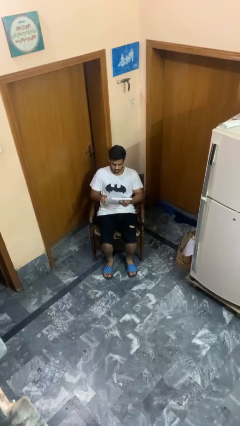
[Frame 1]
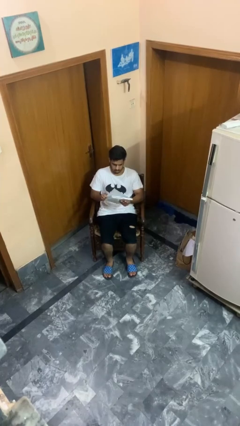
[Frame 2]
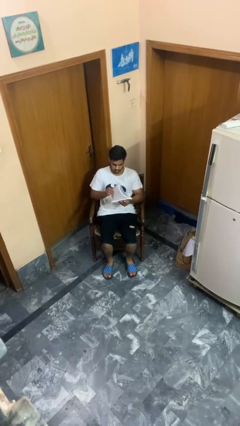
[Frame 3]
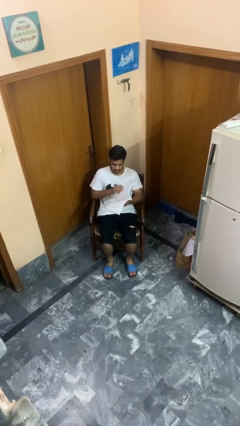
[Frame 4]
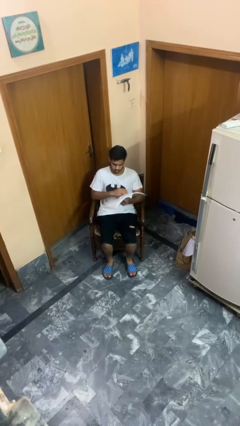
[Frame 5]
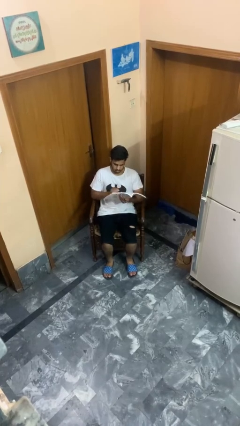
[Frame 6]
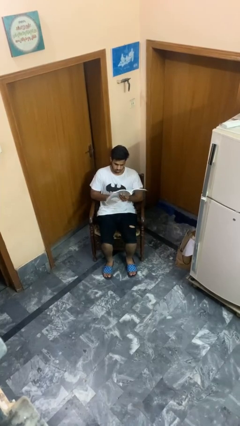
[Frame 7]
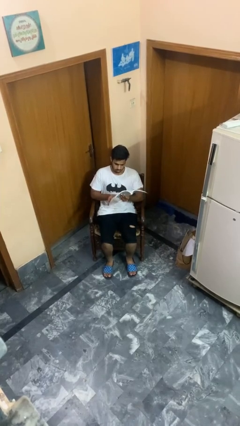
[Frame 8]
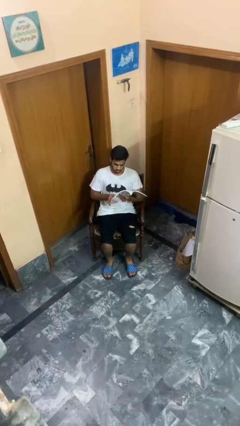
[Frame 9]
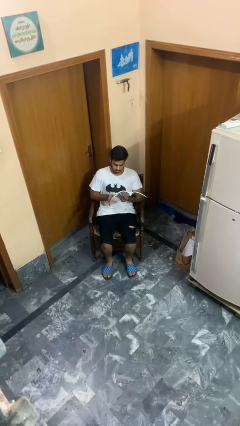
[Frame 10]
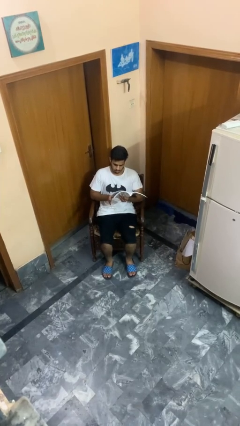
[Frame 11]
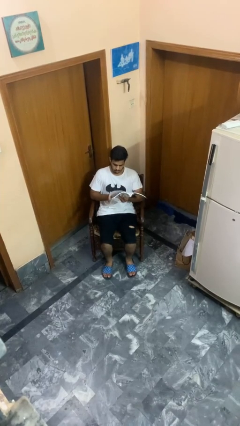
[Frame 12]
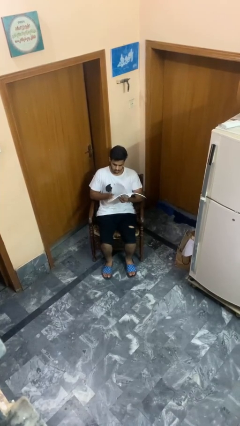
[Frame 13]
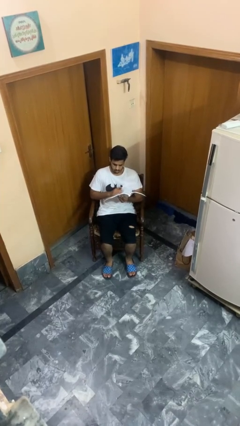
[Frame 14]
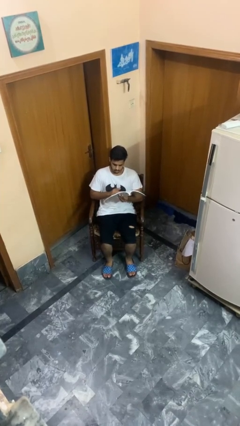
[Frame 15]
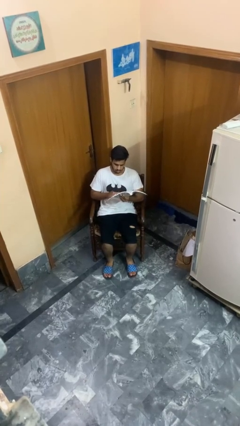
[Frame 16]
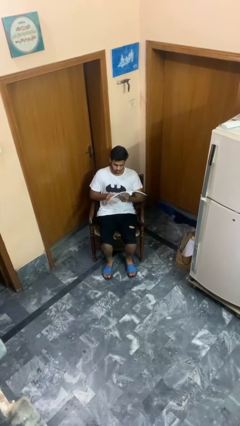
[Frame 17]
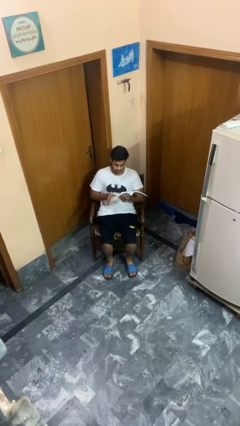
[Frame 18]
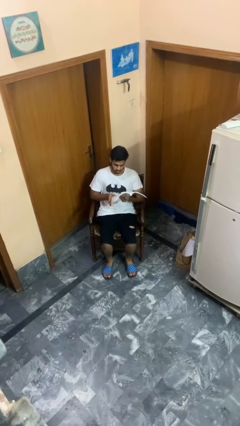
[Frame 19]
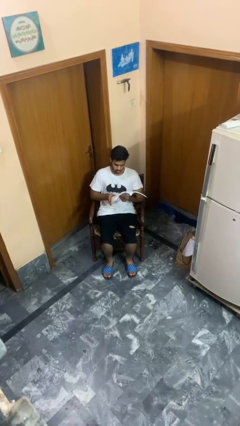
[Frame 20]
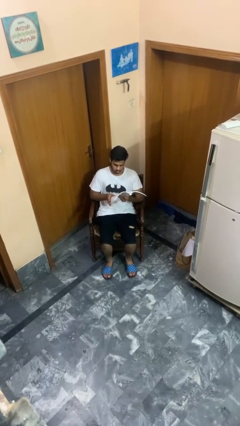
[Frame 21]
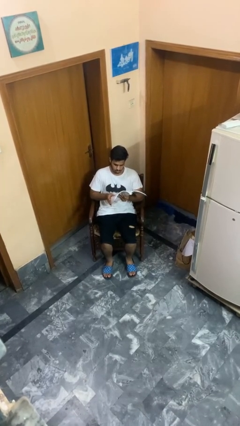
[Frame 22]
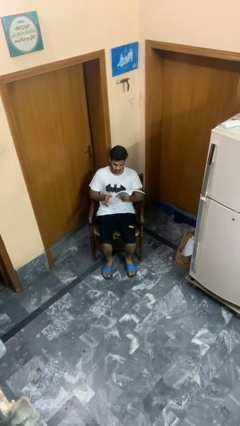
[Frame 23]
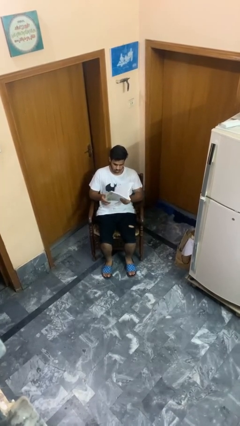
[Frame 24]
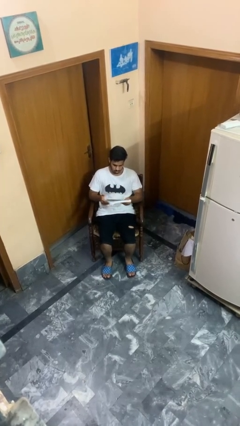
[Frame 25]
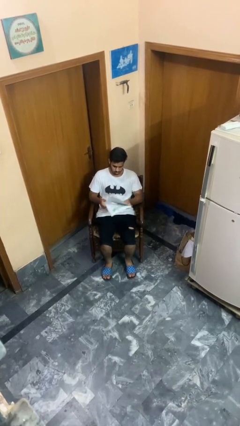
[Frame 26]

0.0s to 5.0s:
person reads book

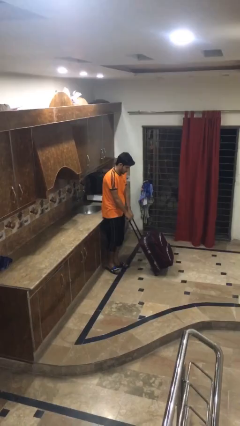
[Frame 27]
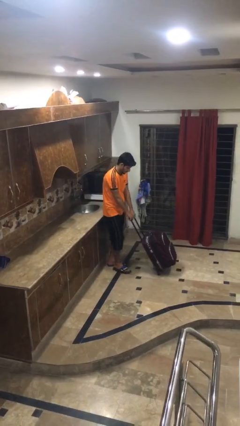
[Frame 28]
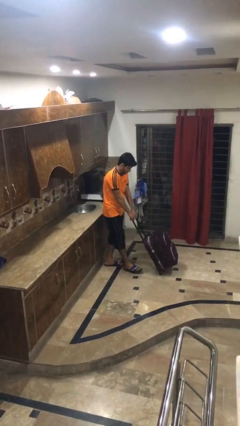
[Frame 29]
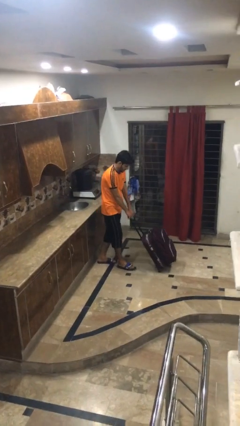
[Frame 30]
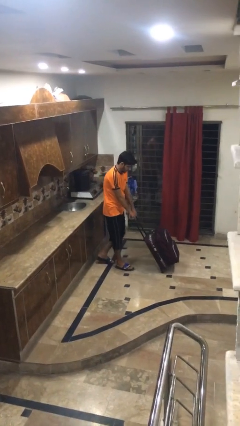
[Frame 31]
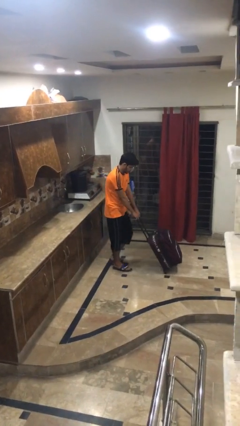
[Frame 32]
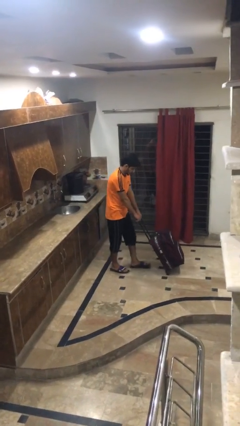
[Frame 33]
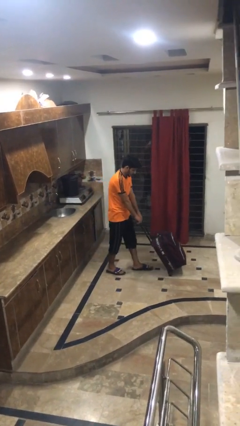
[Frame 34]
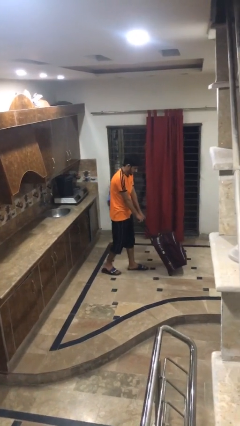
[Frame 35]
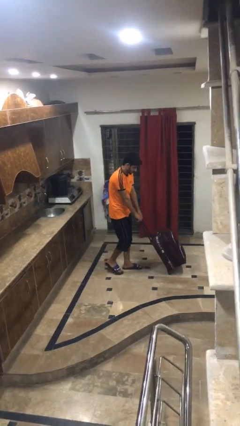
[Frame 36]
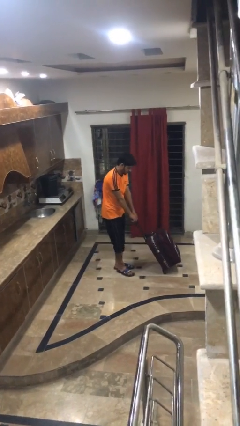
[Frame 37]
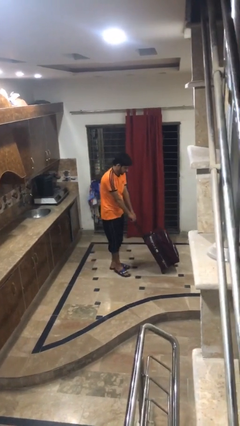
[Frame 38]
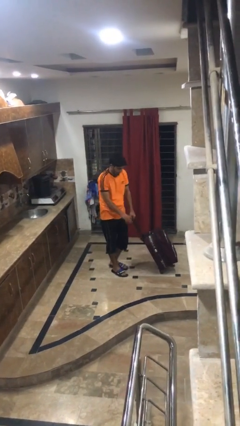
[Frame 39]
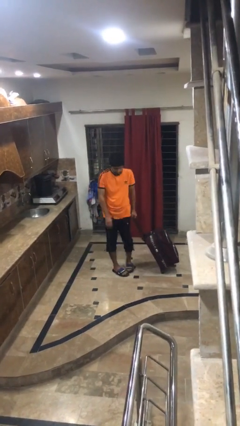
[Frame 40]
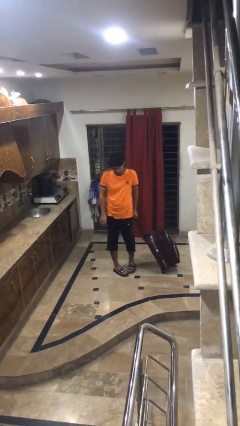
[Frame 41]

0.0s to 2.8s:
person pushes wheeled cart

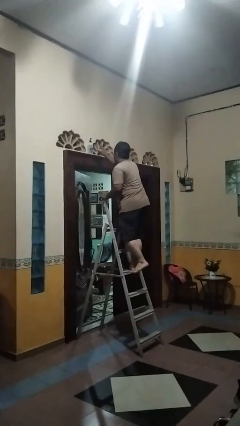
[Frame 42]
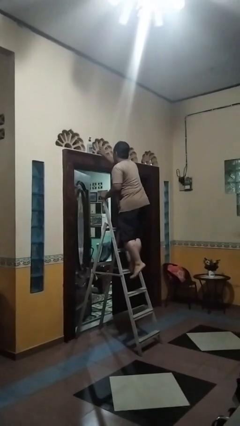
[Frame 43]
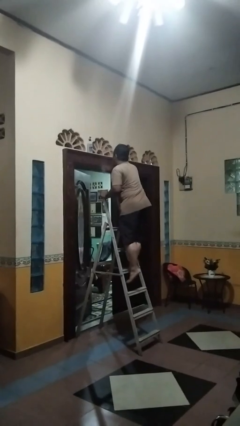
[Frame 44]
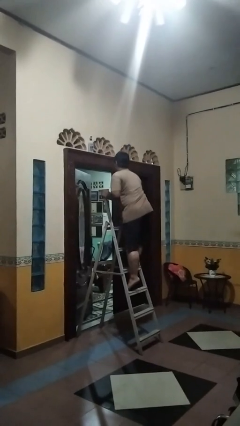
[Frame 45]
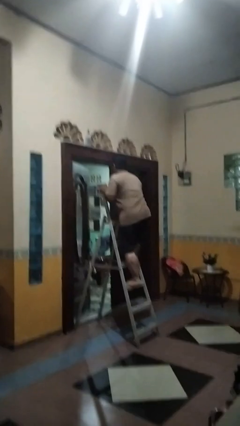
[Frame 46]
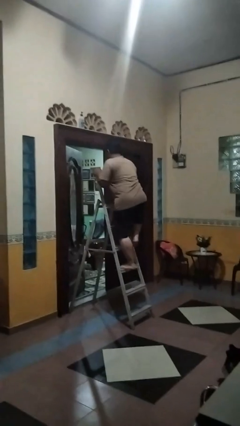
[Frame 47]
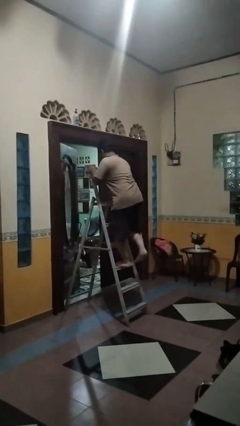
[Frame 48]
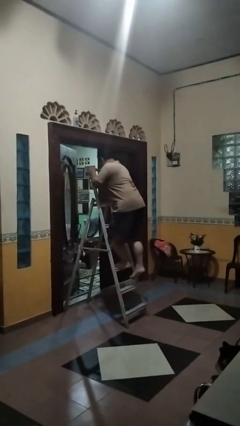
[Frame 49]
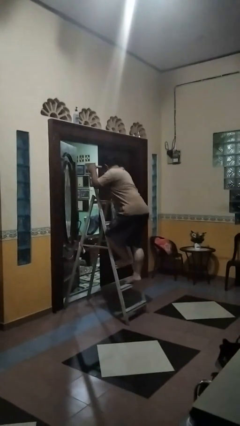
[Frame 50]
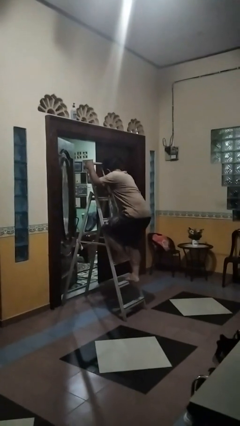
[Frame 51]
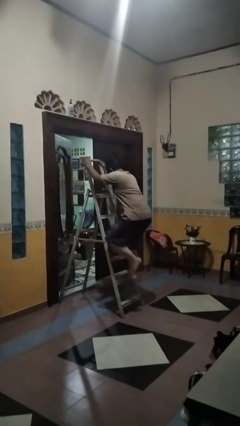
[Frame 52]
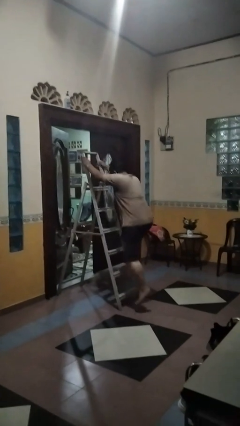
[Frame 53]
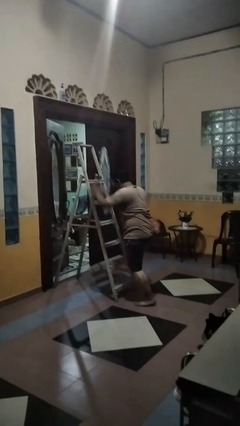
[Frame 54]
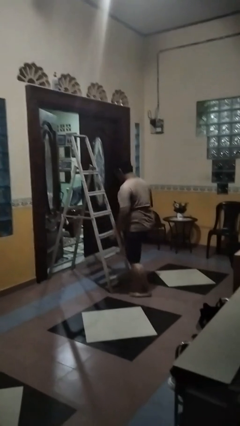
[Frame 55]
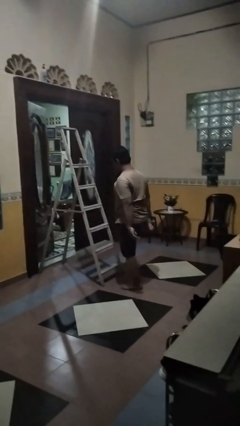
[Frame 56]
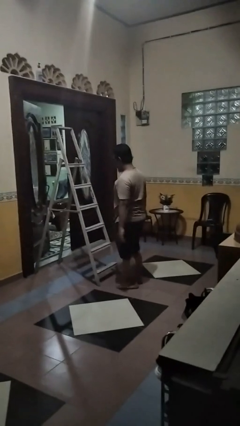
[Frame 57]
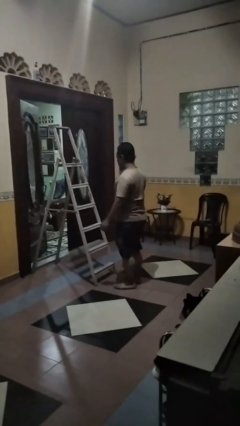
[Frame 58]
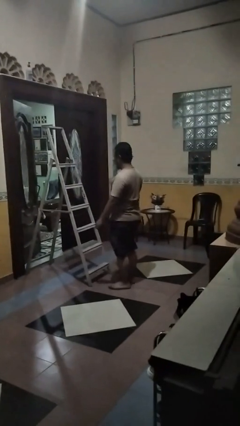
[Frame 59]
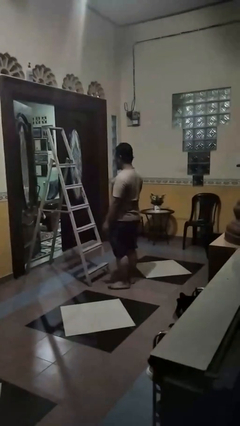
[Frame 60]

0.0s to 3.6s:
person climbs down ladder

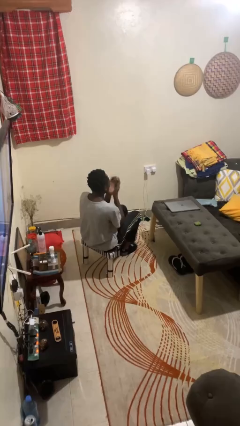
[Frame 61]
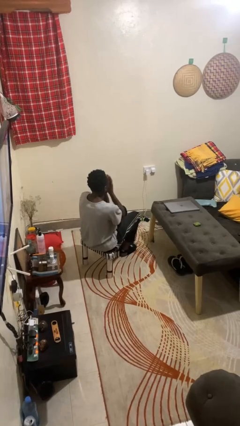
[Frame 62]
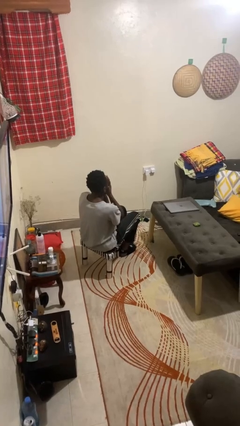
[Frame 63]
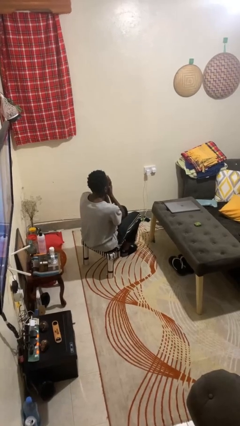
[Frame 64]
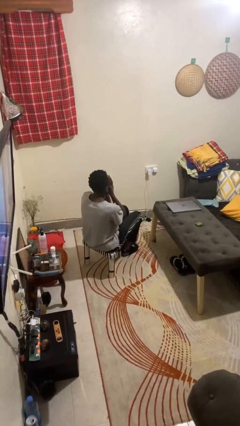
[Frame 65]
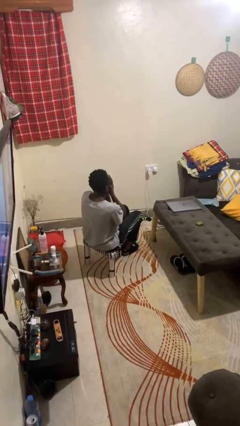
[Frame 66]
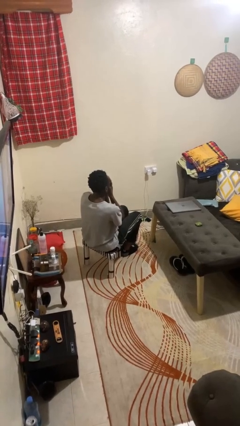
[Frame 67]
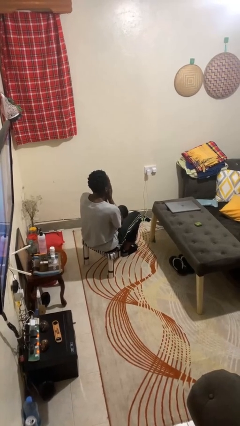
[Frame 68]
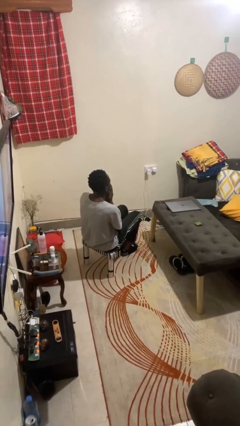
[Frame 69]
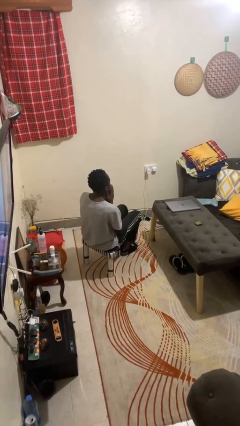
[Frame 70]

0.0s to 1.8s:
person covers face with hands

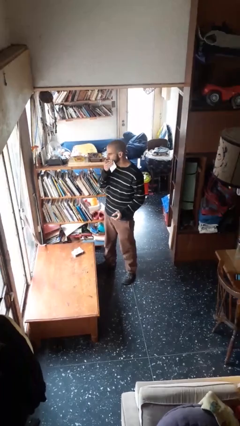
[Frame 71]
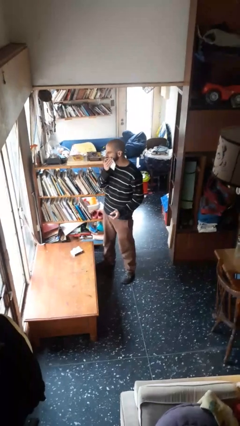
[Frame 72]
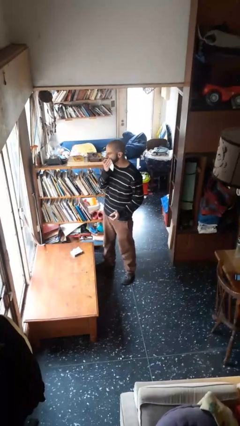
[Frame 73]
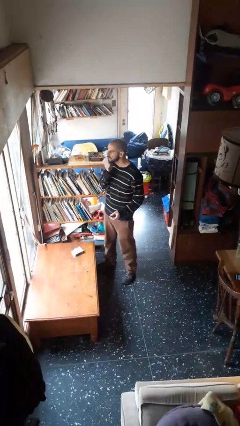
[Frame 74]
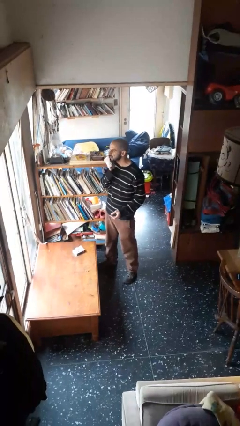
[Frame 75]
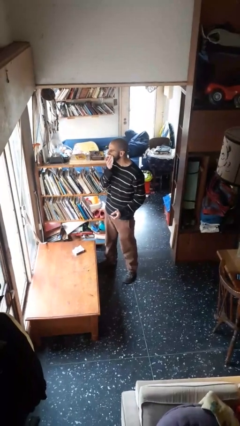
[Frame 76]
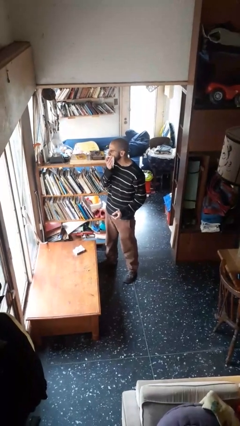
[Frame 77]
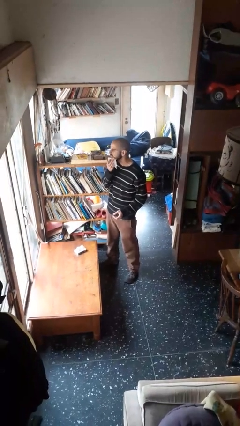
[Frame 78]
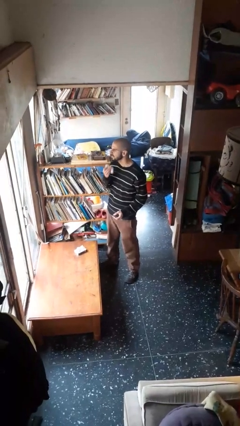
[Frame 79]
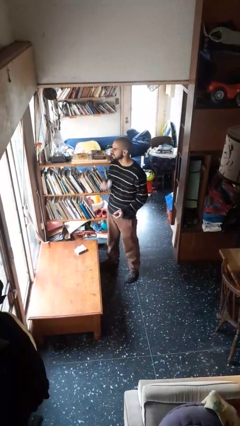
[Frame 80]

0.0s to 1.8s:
person wipes mouth with napkin

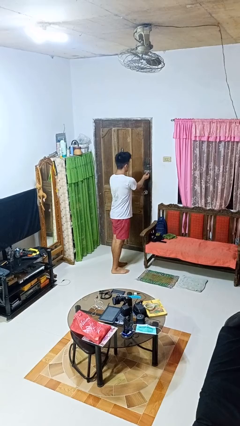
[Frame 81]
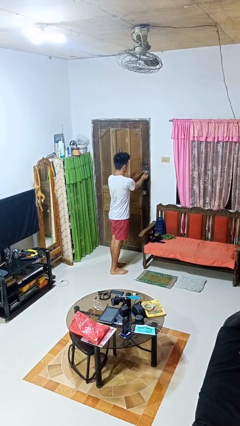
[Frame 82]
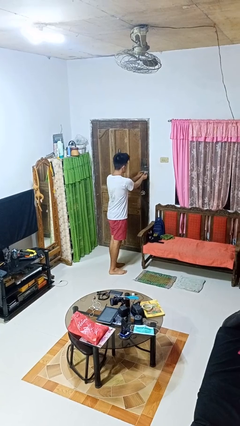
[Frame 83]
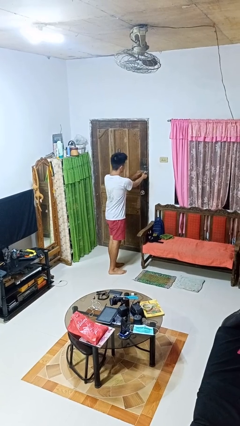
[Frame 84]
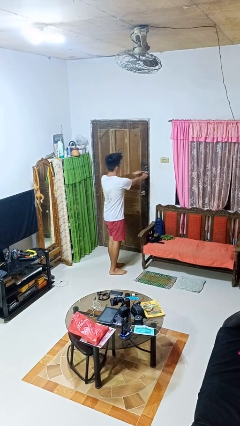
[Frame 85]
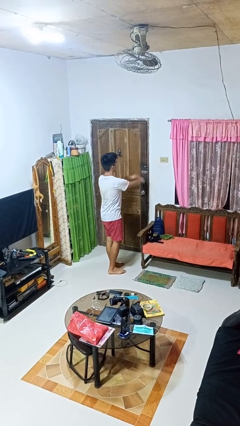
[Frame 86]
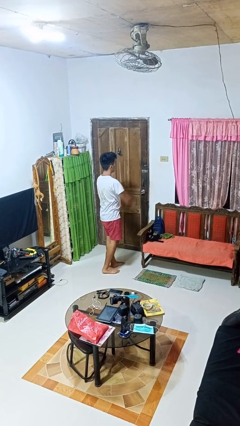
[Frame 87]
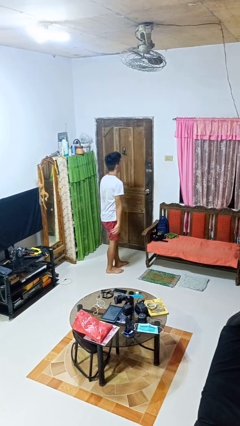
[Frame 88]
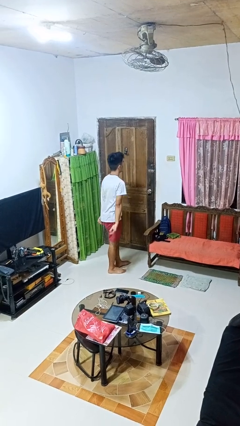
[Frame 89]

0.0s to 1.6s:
person locks door with keys

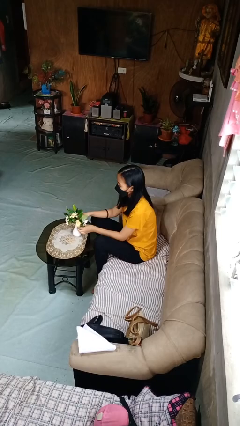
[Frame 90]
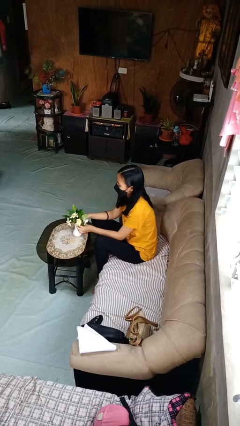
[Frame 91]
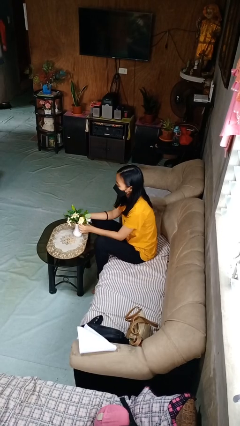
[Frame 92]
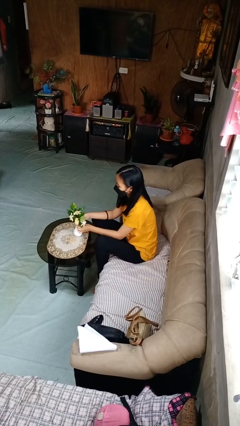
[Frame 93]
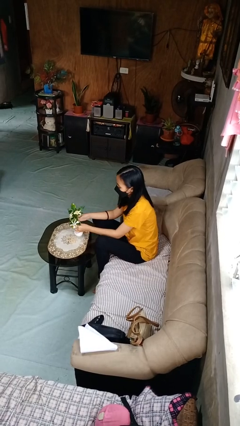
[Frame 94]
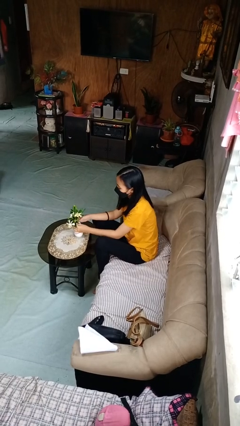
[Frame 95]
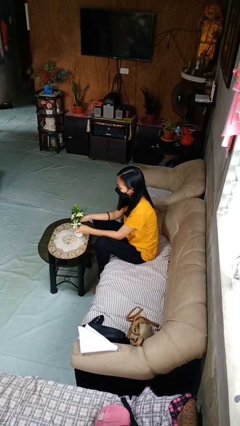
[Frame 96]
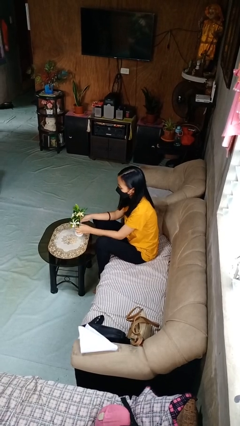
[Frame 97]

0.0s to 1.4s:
person arranges flowers in vase
